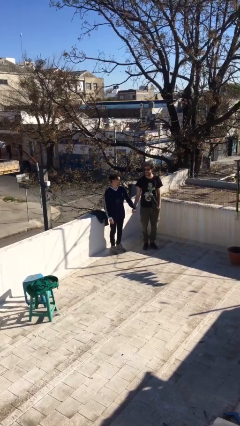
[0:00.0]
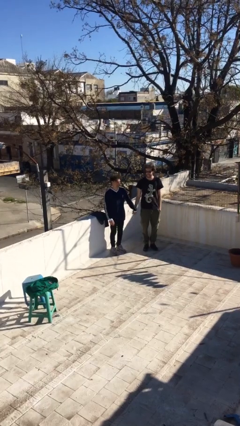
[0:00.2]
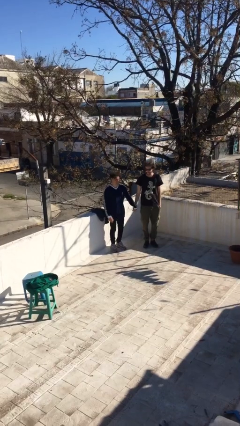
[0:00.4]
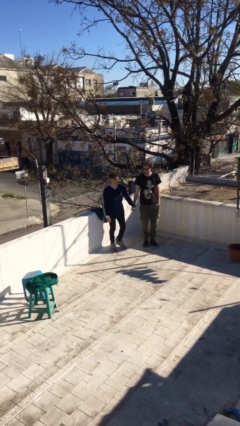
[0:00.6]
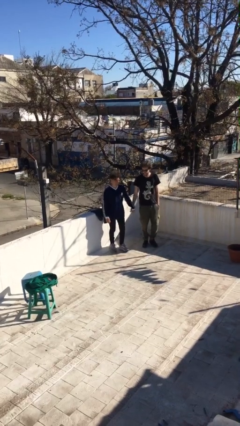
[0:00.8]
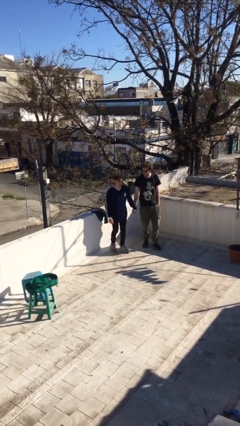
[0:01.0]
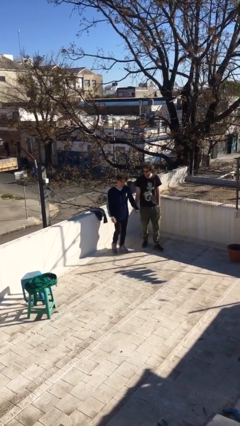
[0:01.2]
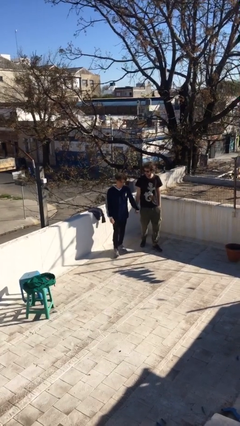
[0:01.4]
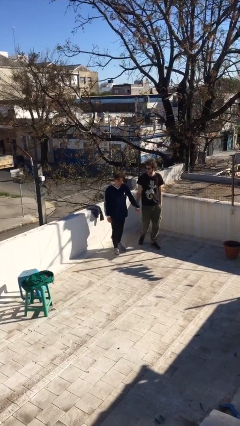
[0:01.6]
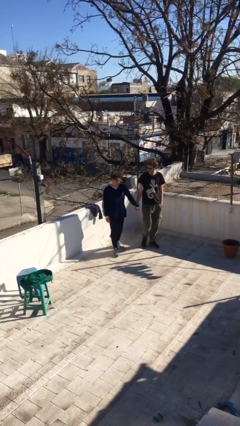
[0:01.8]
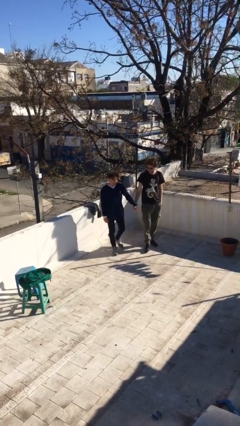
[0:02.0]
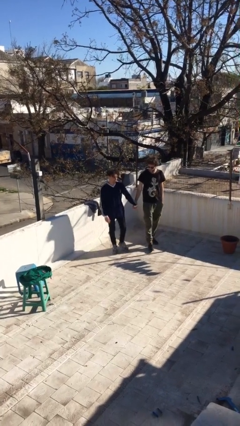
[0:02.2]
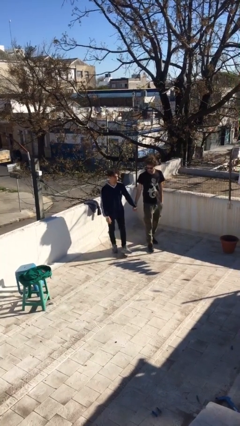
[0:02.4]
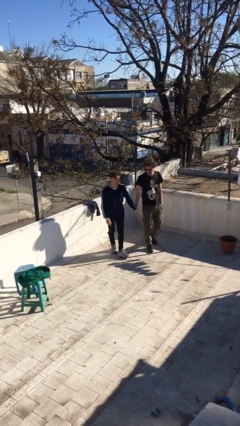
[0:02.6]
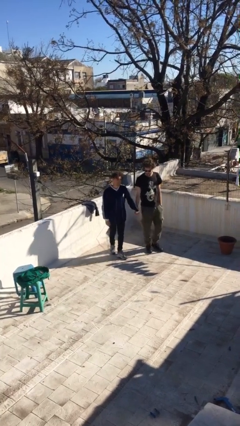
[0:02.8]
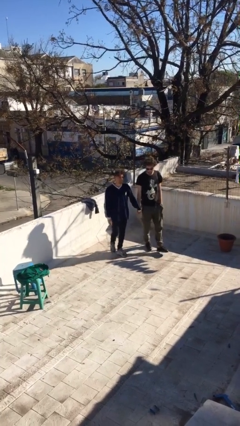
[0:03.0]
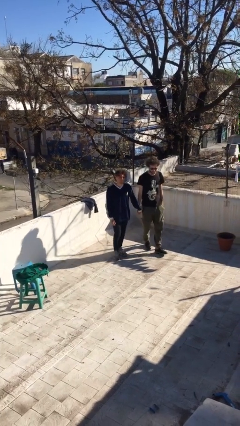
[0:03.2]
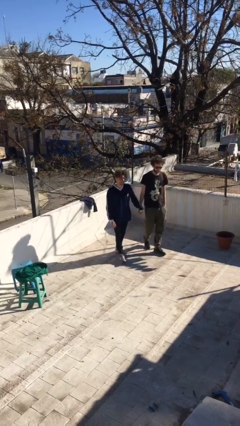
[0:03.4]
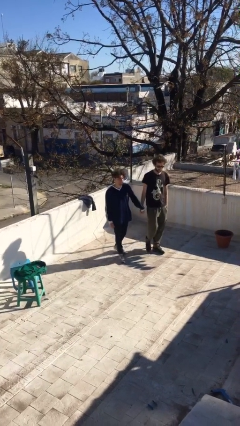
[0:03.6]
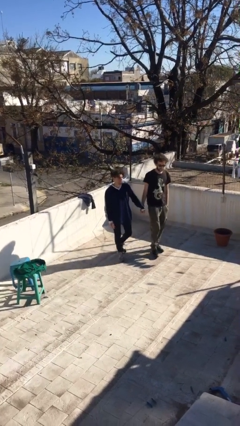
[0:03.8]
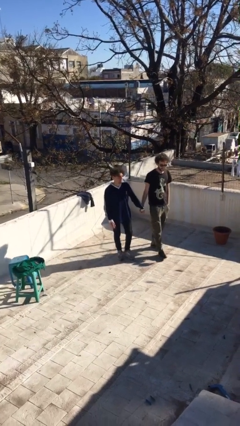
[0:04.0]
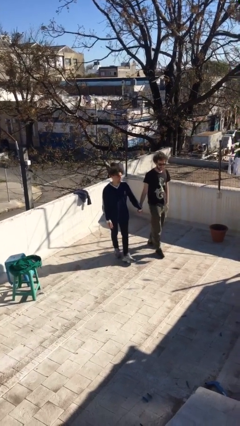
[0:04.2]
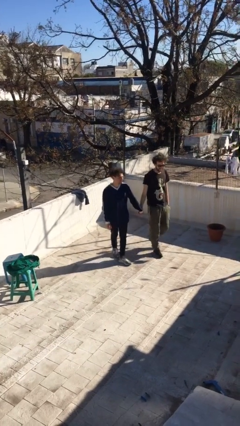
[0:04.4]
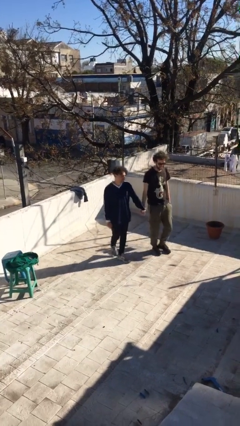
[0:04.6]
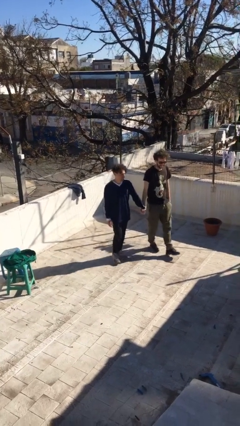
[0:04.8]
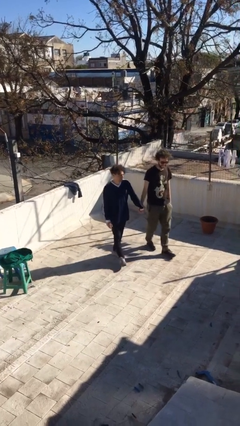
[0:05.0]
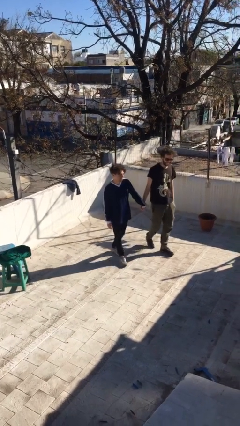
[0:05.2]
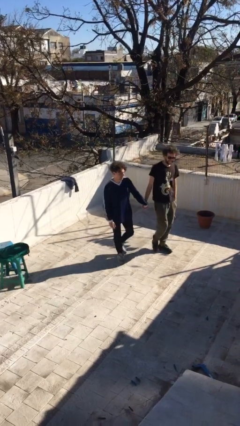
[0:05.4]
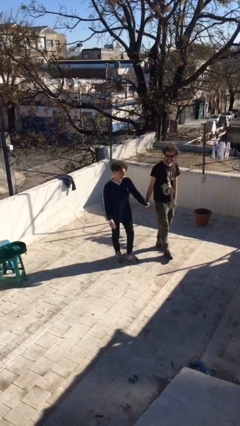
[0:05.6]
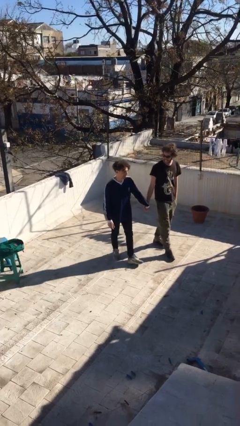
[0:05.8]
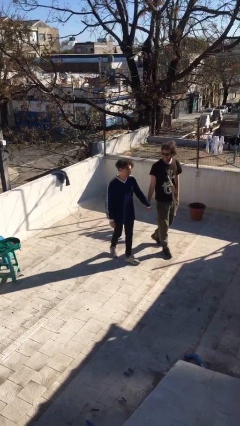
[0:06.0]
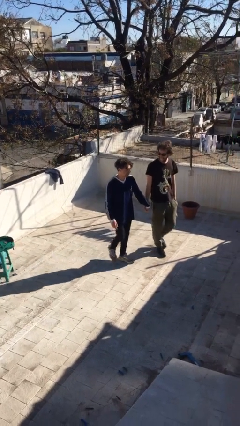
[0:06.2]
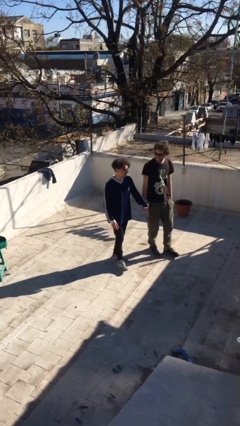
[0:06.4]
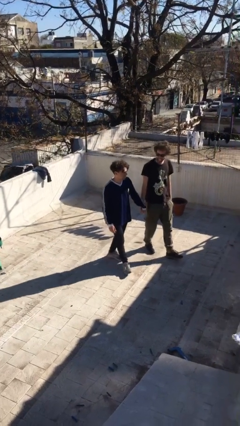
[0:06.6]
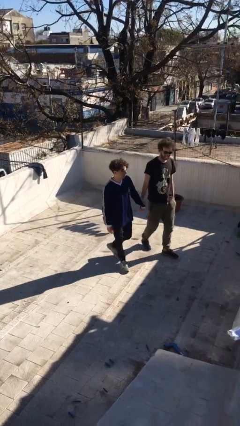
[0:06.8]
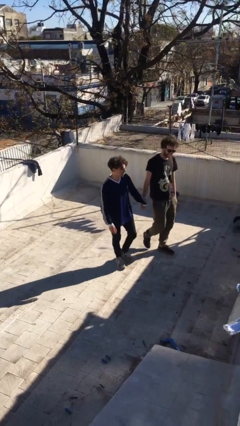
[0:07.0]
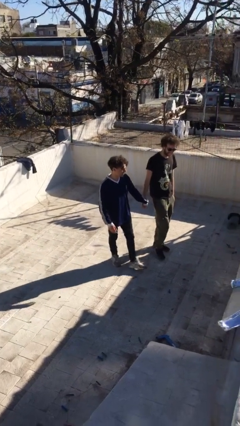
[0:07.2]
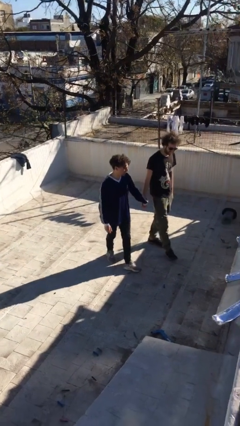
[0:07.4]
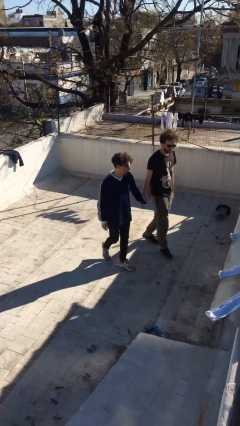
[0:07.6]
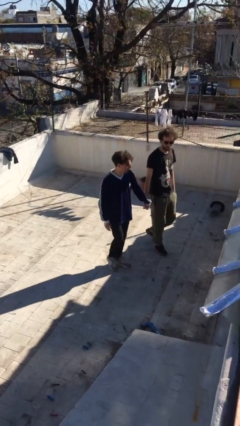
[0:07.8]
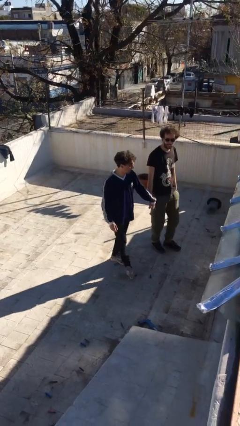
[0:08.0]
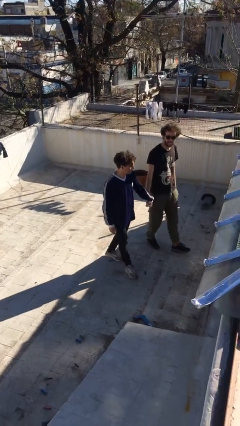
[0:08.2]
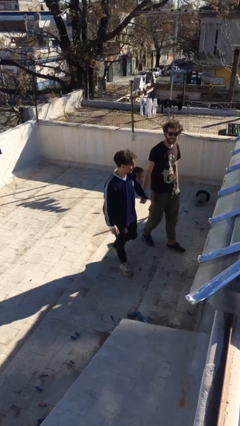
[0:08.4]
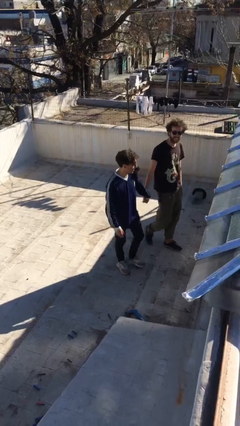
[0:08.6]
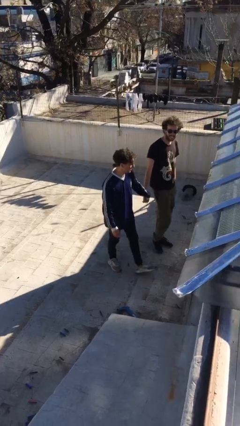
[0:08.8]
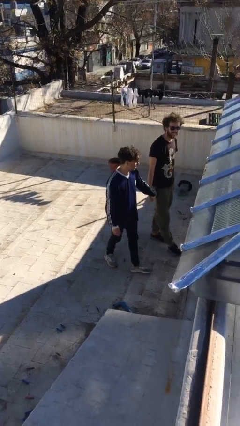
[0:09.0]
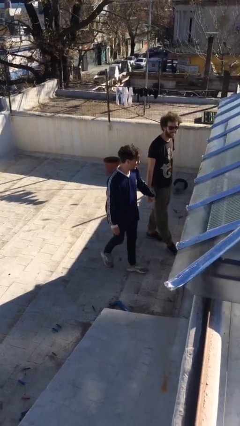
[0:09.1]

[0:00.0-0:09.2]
person holds hand

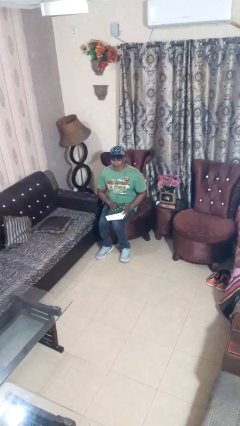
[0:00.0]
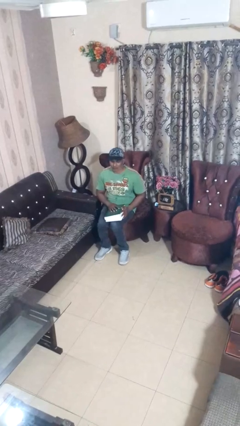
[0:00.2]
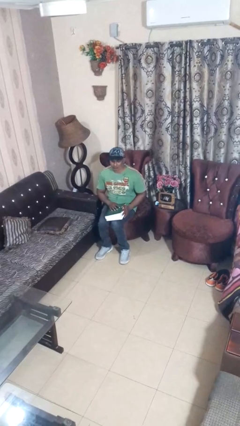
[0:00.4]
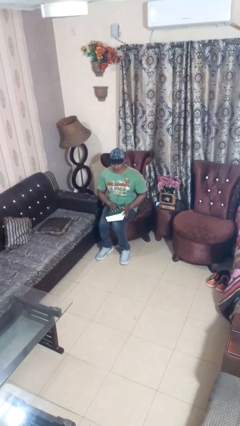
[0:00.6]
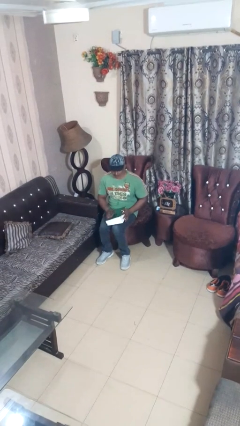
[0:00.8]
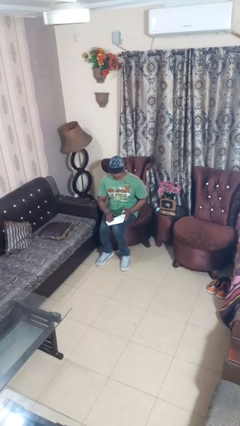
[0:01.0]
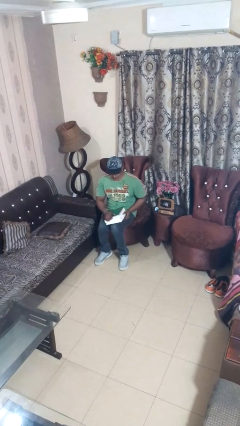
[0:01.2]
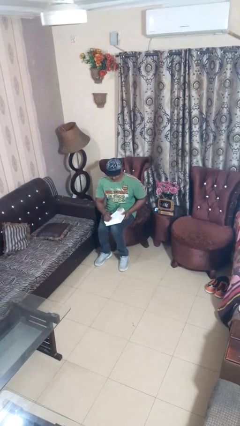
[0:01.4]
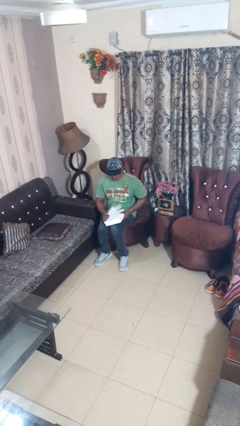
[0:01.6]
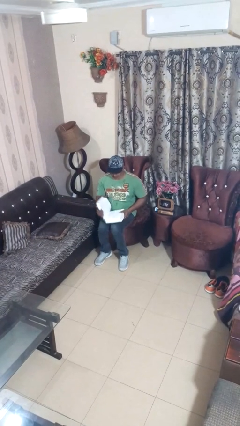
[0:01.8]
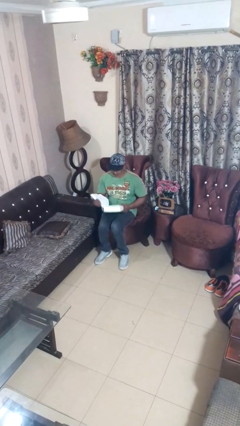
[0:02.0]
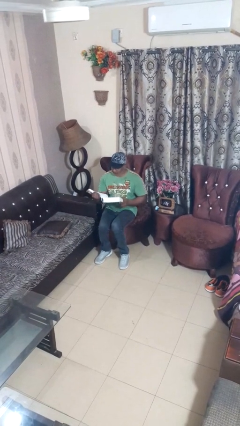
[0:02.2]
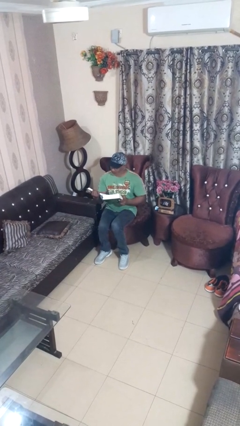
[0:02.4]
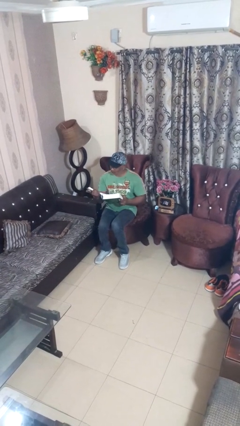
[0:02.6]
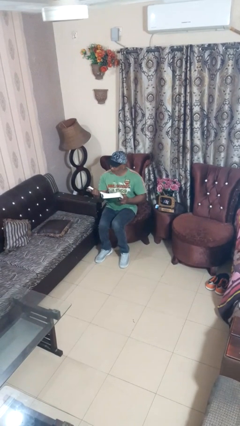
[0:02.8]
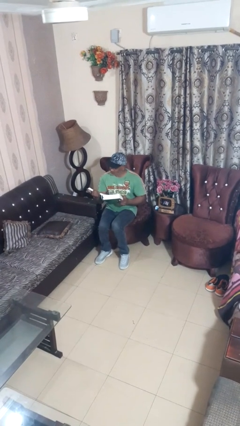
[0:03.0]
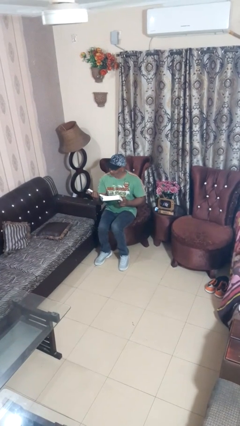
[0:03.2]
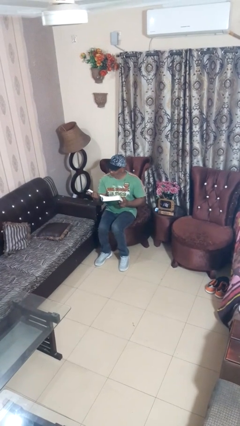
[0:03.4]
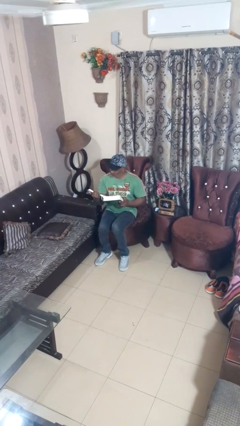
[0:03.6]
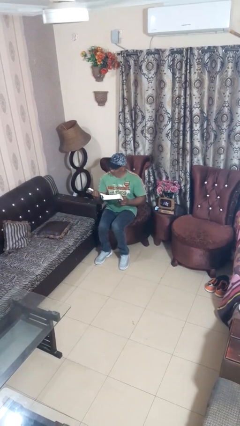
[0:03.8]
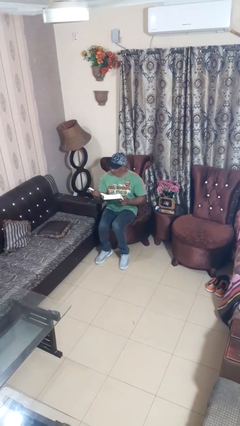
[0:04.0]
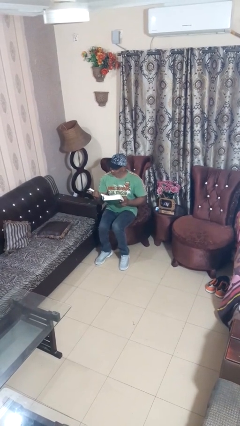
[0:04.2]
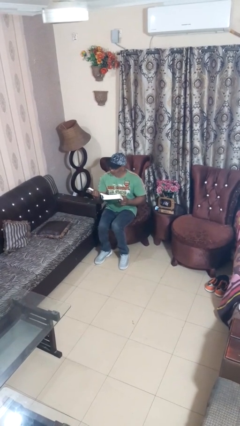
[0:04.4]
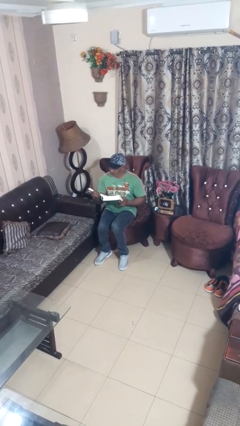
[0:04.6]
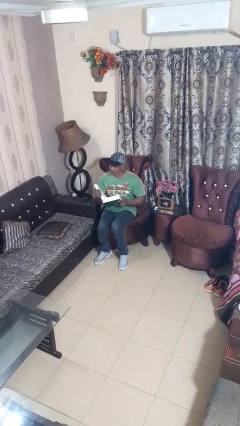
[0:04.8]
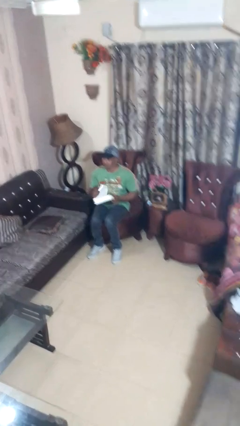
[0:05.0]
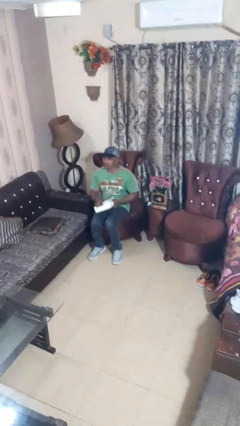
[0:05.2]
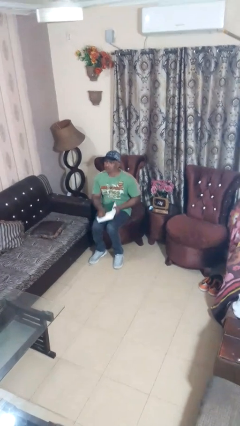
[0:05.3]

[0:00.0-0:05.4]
person reads book

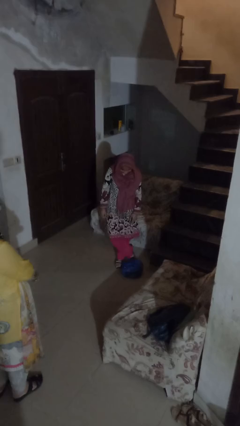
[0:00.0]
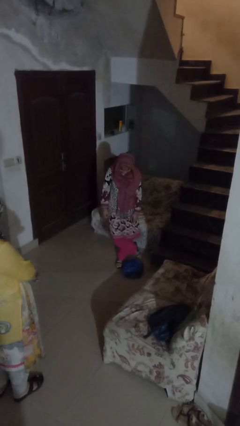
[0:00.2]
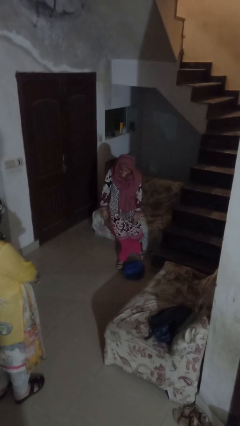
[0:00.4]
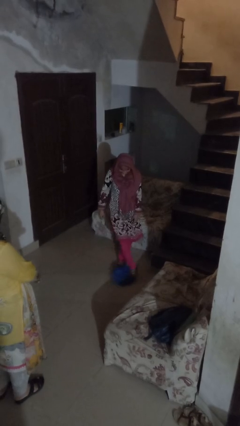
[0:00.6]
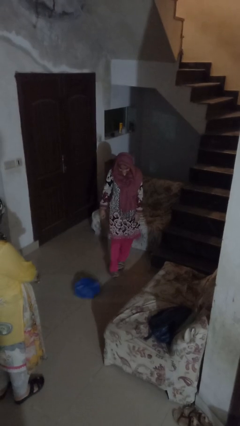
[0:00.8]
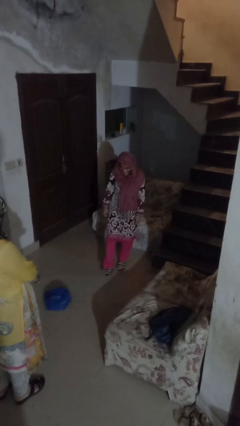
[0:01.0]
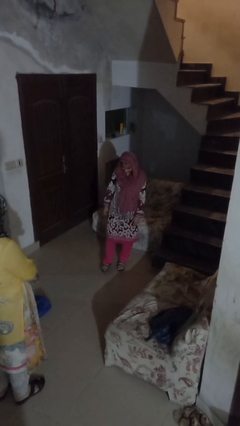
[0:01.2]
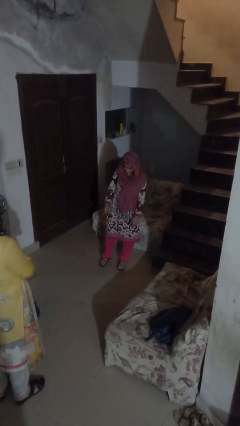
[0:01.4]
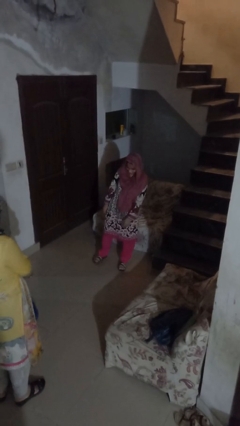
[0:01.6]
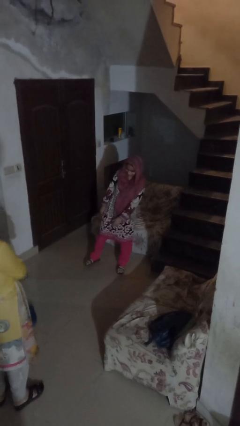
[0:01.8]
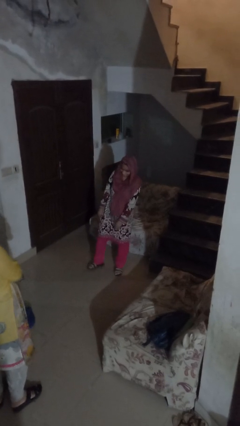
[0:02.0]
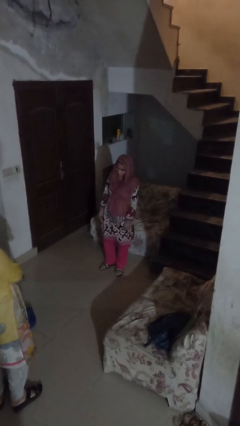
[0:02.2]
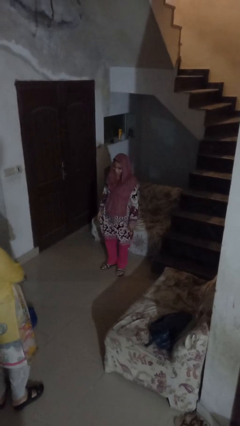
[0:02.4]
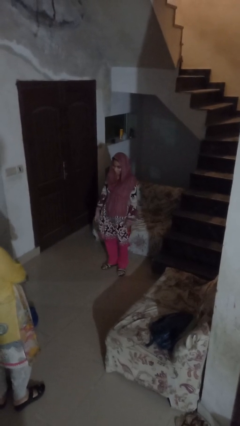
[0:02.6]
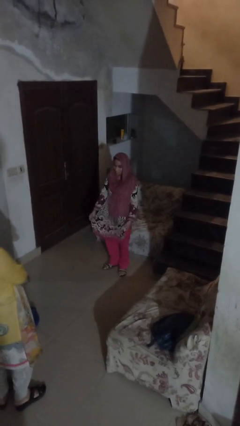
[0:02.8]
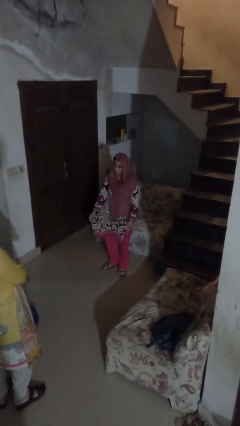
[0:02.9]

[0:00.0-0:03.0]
person kicks object to person
